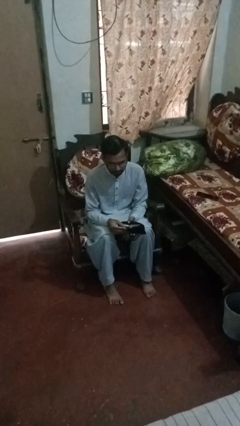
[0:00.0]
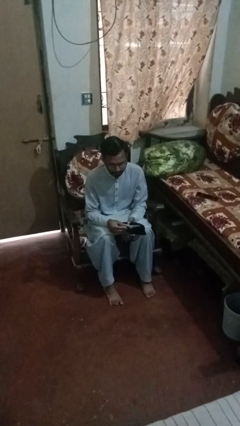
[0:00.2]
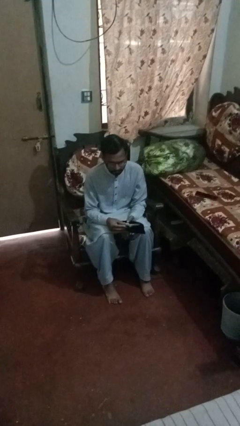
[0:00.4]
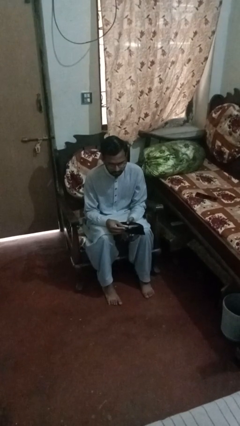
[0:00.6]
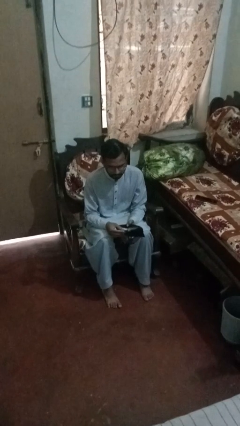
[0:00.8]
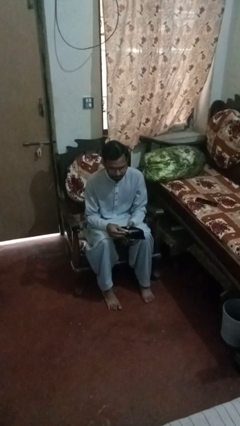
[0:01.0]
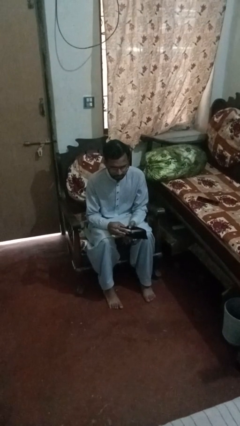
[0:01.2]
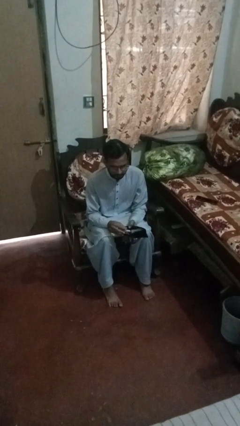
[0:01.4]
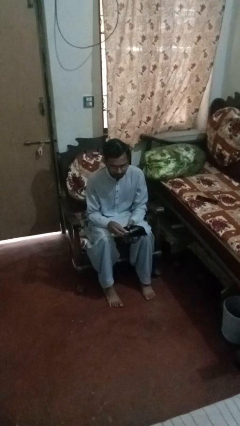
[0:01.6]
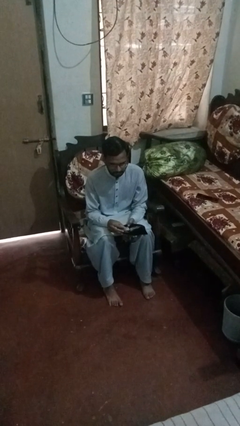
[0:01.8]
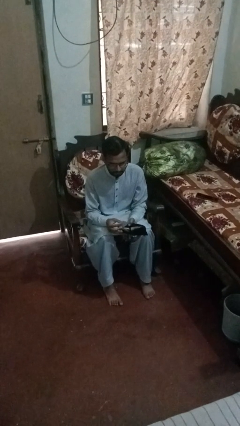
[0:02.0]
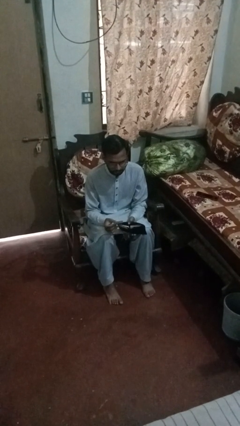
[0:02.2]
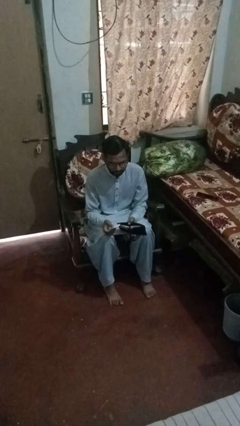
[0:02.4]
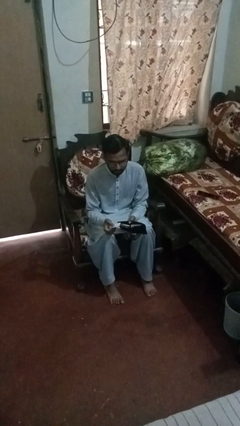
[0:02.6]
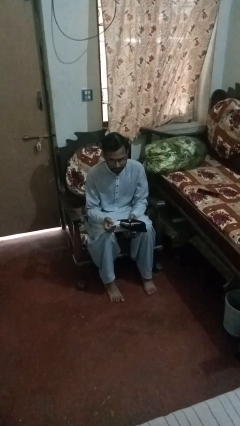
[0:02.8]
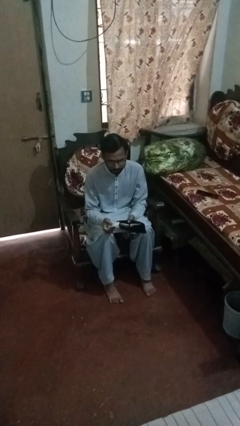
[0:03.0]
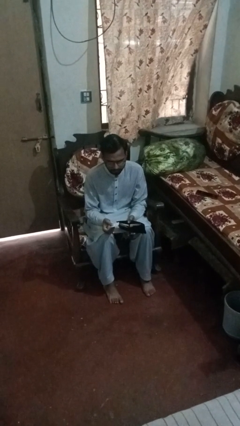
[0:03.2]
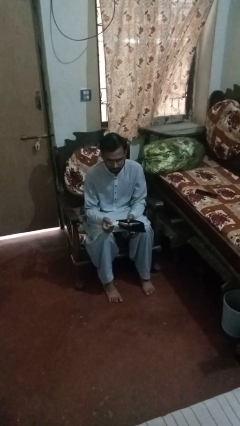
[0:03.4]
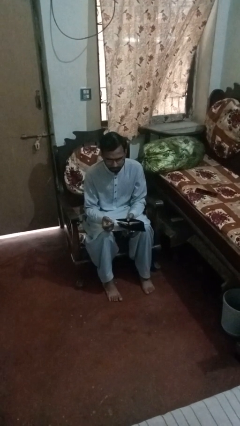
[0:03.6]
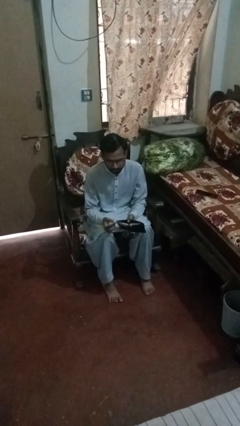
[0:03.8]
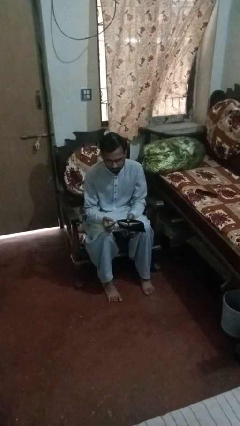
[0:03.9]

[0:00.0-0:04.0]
person takes object from purse

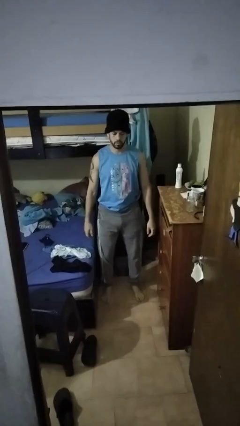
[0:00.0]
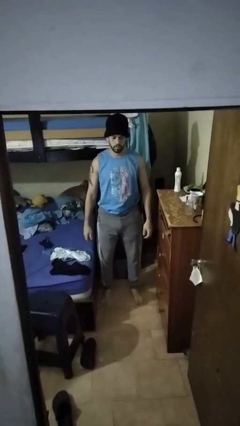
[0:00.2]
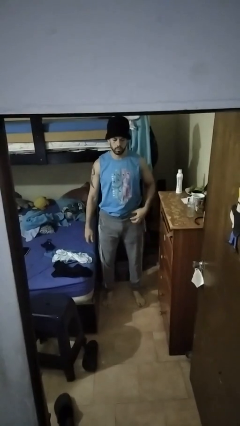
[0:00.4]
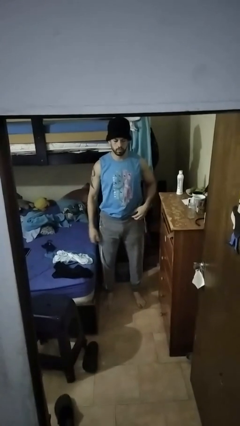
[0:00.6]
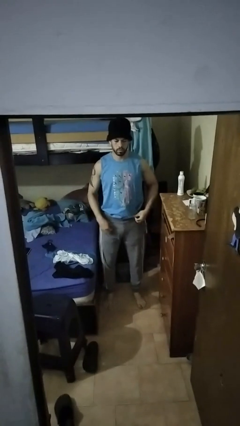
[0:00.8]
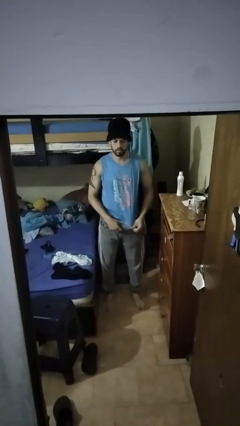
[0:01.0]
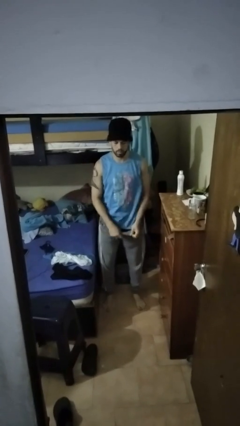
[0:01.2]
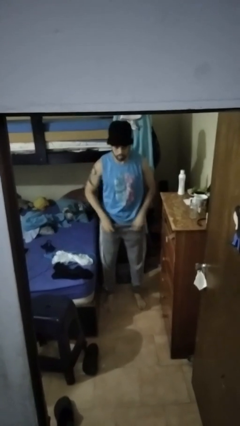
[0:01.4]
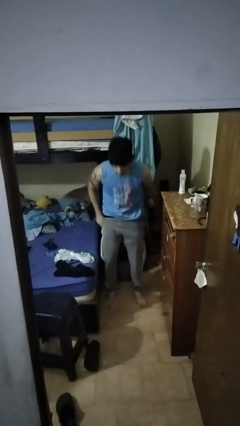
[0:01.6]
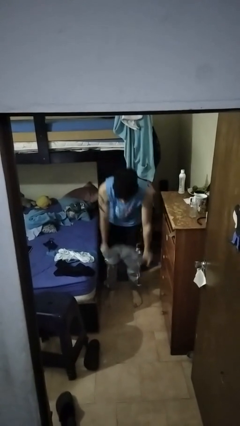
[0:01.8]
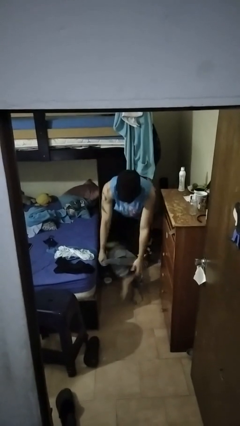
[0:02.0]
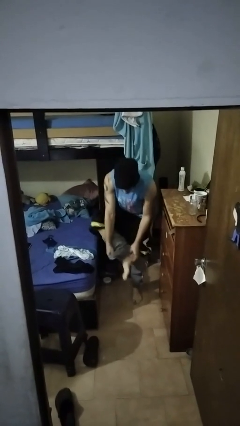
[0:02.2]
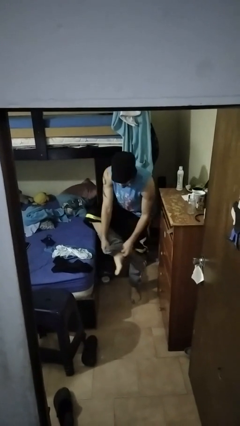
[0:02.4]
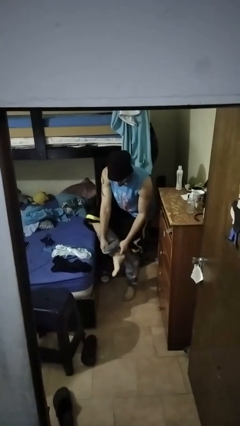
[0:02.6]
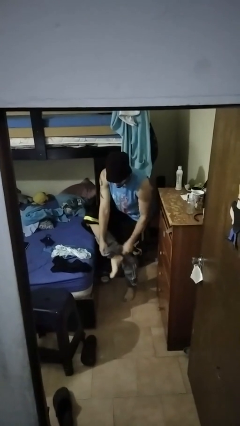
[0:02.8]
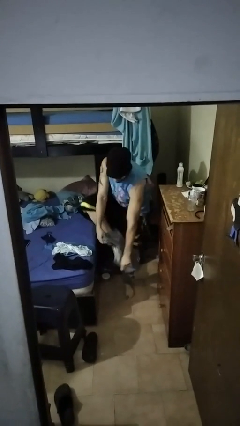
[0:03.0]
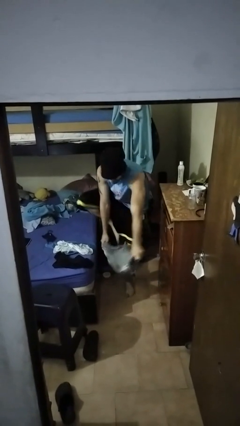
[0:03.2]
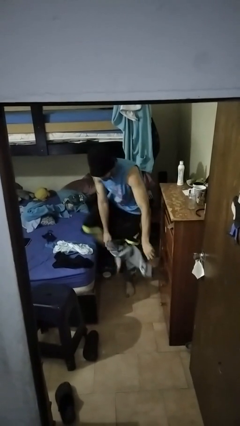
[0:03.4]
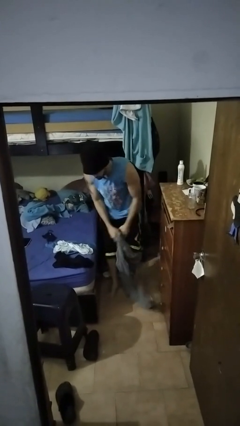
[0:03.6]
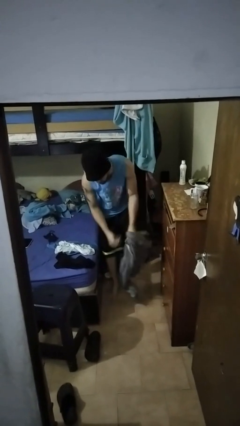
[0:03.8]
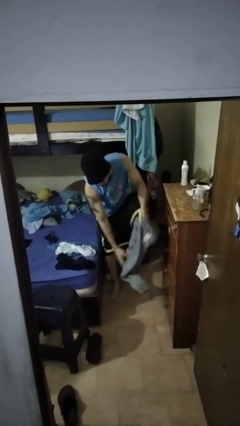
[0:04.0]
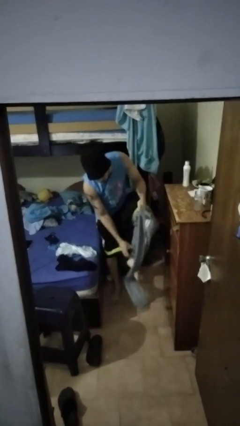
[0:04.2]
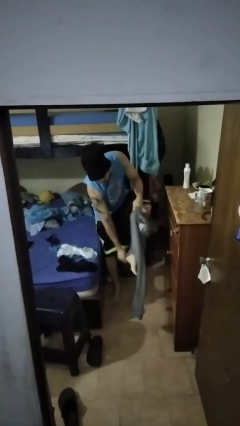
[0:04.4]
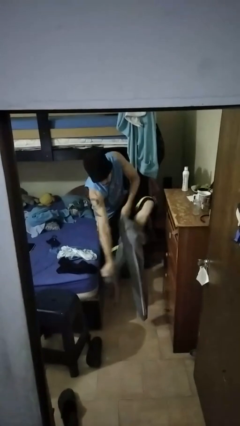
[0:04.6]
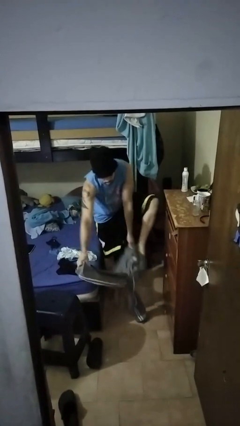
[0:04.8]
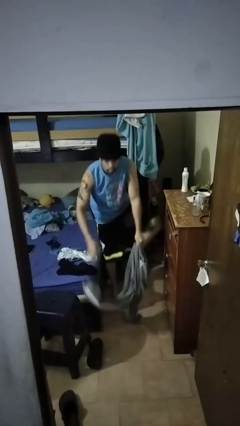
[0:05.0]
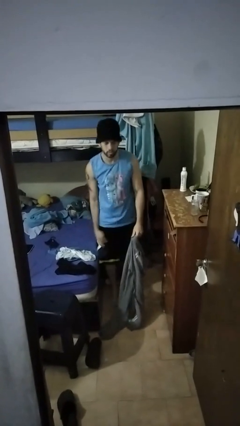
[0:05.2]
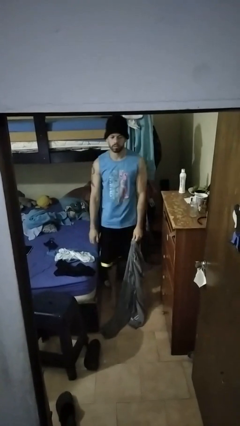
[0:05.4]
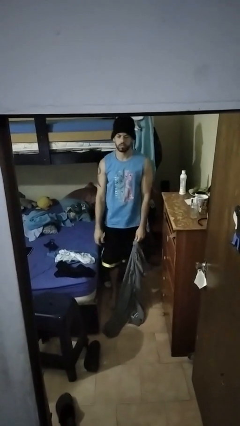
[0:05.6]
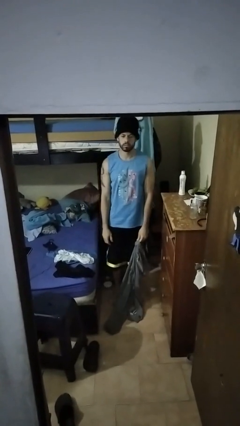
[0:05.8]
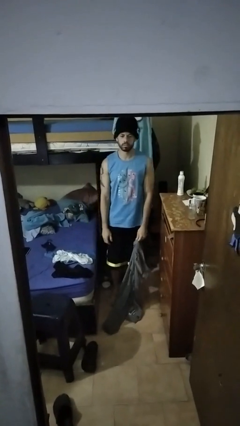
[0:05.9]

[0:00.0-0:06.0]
person takes off pants

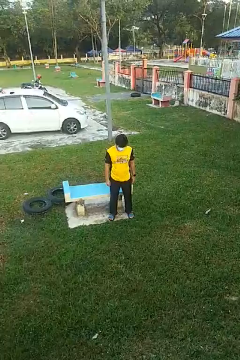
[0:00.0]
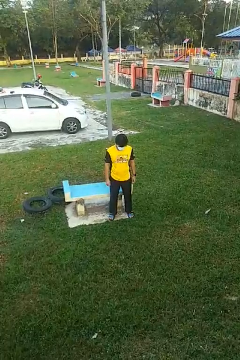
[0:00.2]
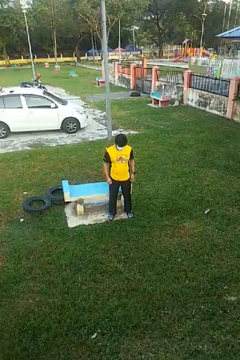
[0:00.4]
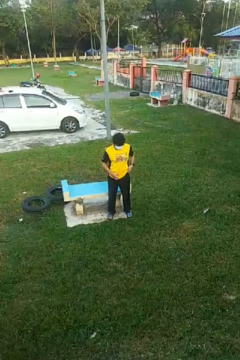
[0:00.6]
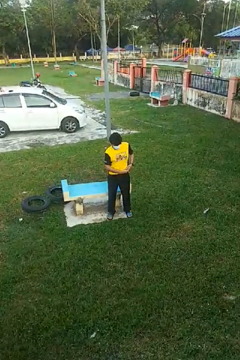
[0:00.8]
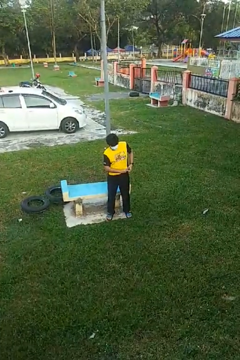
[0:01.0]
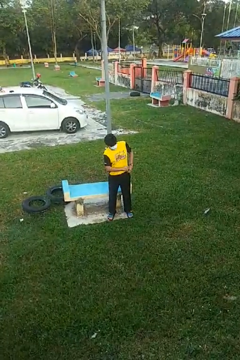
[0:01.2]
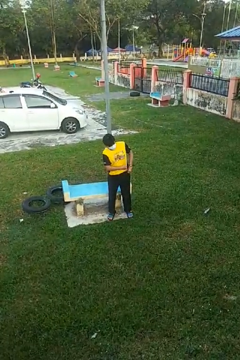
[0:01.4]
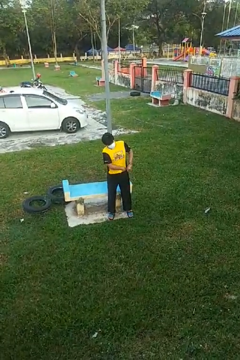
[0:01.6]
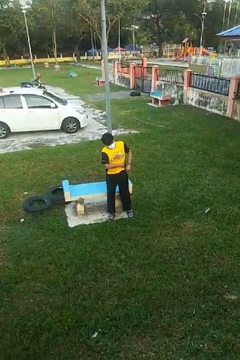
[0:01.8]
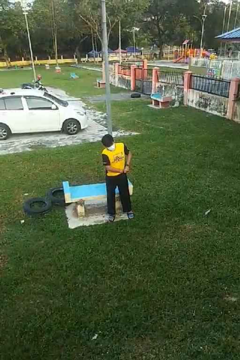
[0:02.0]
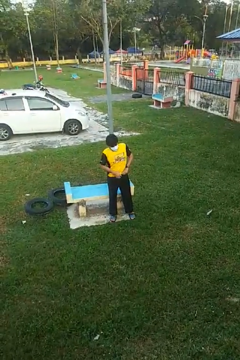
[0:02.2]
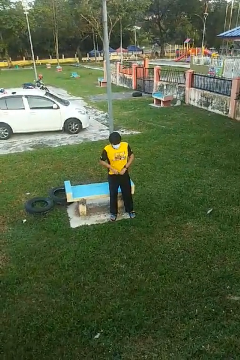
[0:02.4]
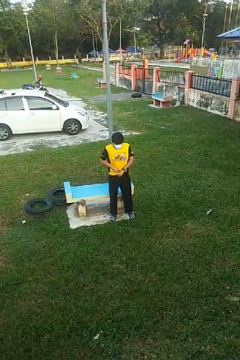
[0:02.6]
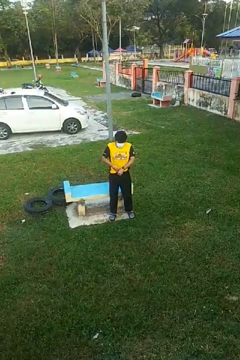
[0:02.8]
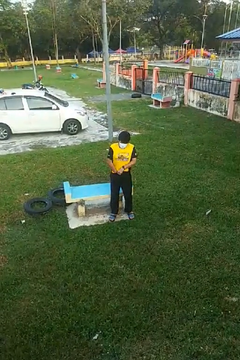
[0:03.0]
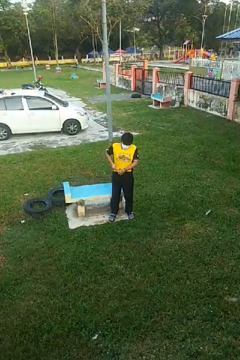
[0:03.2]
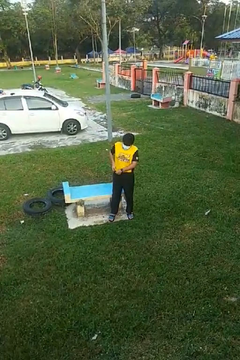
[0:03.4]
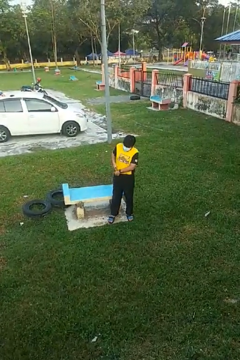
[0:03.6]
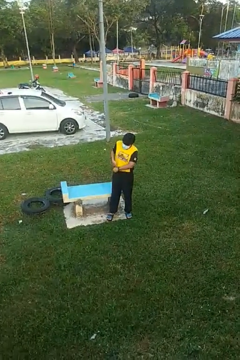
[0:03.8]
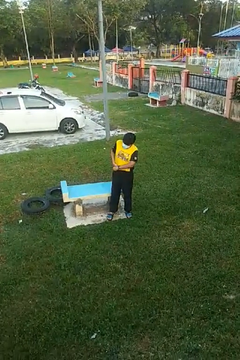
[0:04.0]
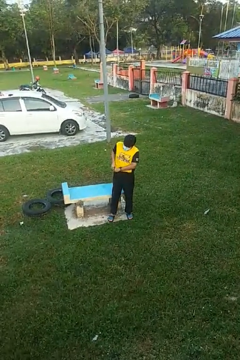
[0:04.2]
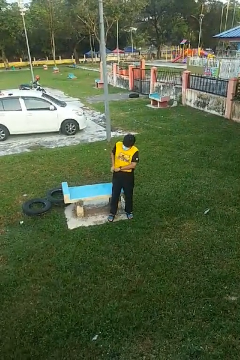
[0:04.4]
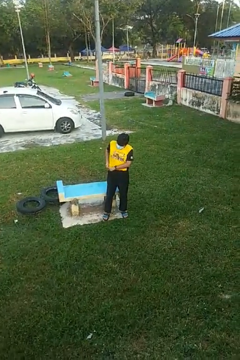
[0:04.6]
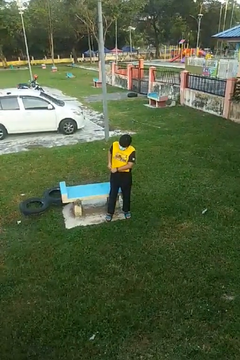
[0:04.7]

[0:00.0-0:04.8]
person tucks in shirt

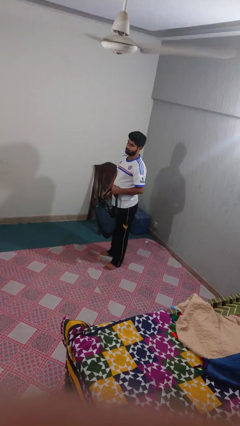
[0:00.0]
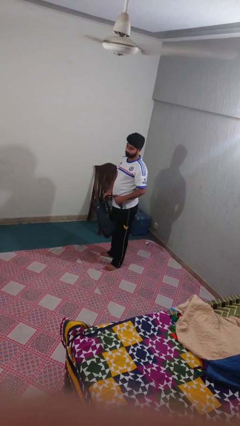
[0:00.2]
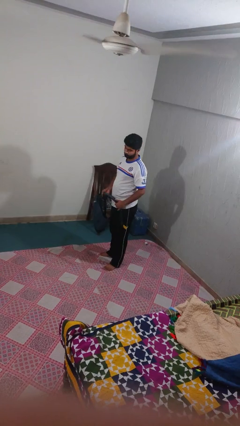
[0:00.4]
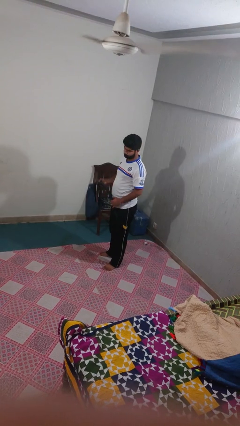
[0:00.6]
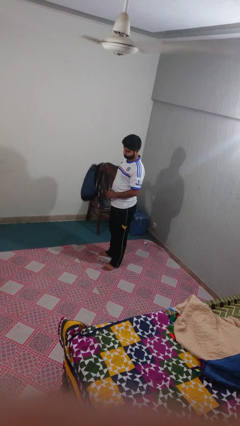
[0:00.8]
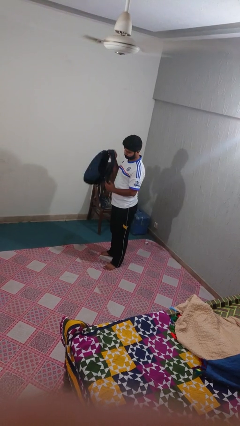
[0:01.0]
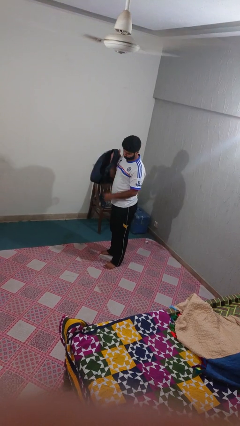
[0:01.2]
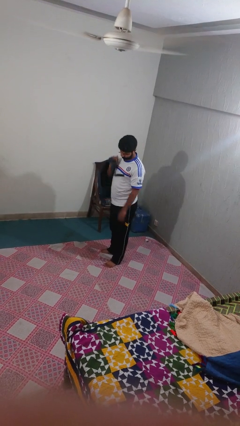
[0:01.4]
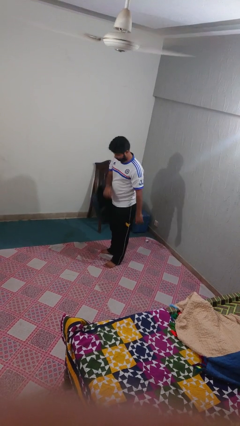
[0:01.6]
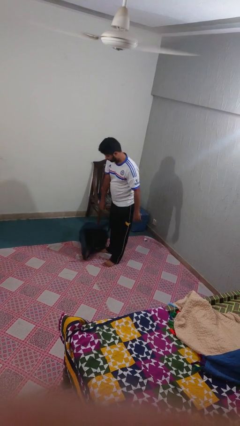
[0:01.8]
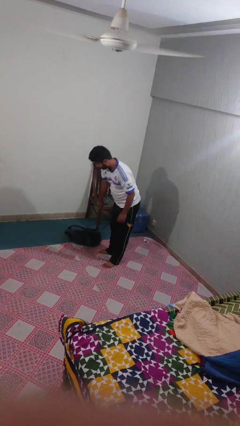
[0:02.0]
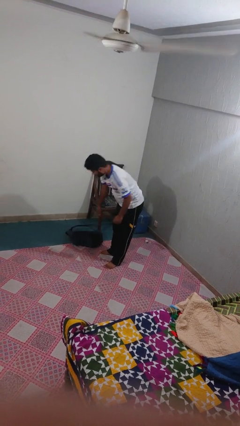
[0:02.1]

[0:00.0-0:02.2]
person drops object

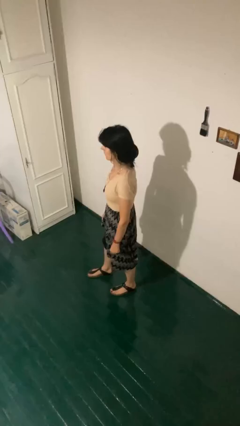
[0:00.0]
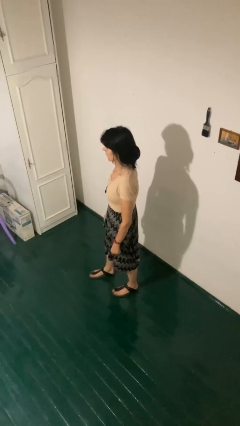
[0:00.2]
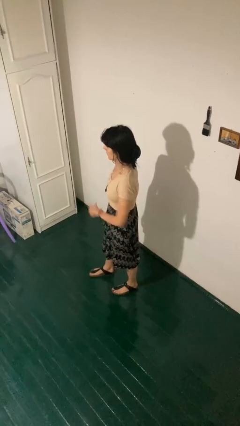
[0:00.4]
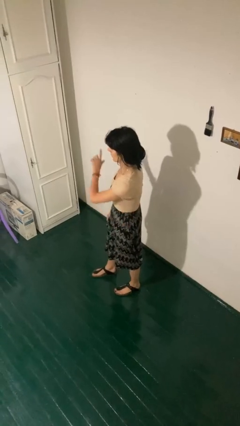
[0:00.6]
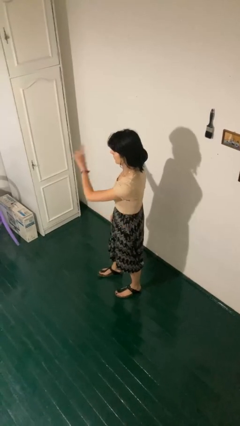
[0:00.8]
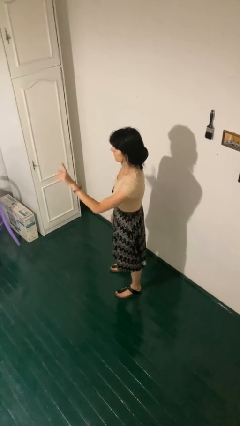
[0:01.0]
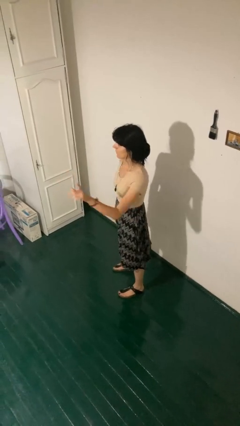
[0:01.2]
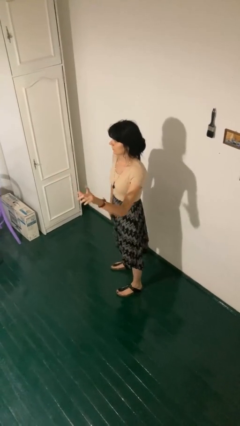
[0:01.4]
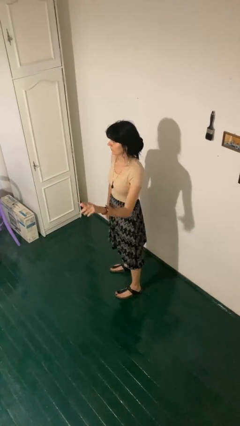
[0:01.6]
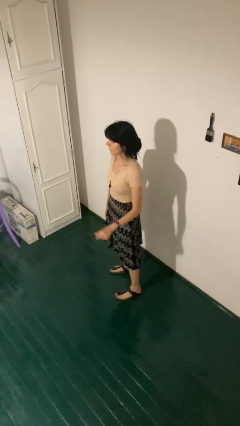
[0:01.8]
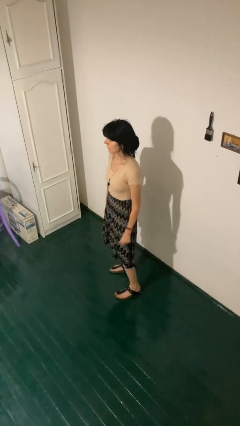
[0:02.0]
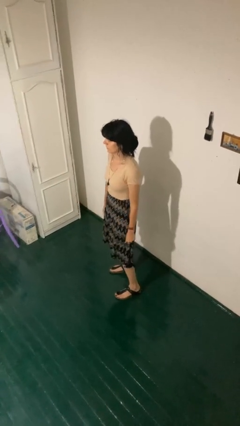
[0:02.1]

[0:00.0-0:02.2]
person gestures swipe left
